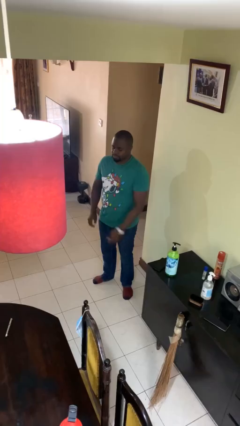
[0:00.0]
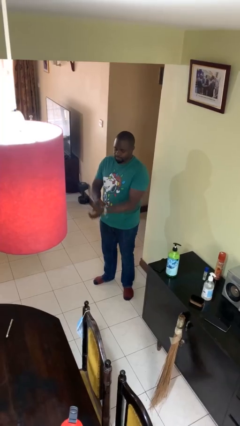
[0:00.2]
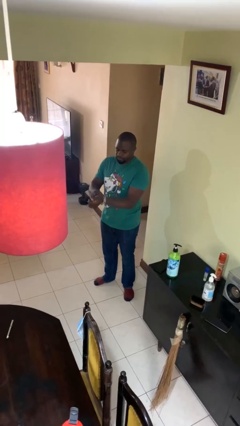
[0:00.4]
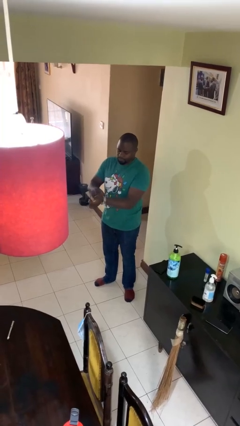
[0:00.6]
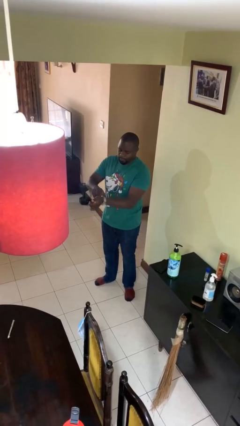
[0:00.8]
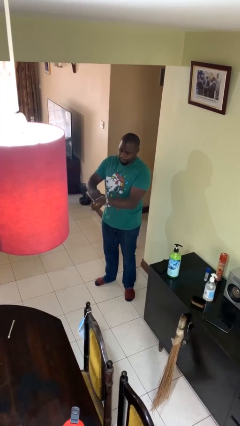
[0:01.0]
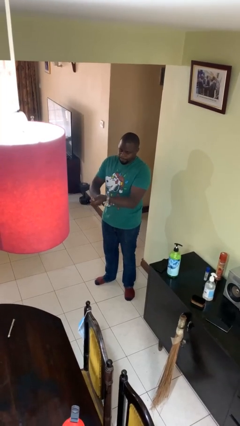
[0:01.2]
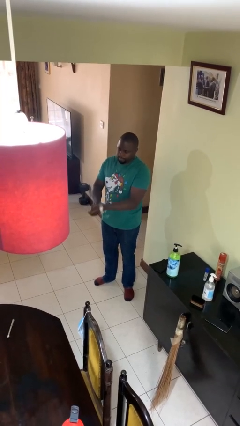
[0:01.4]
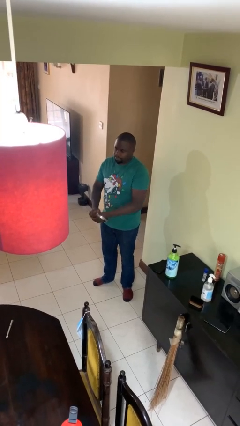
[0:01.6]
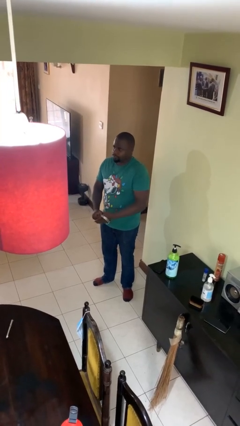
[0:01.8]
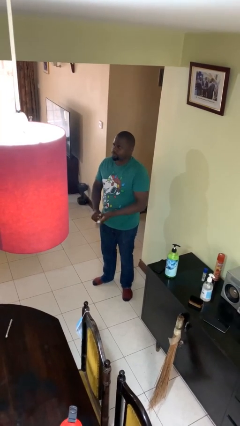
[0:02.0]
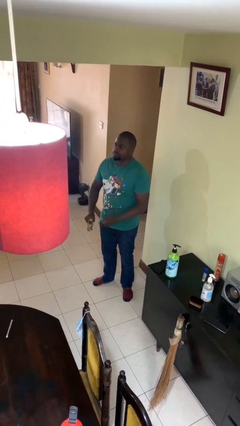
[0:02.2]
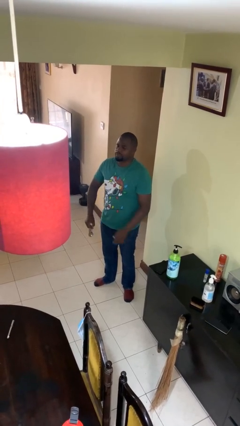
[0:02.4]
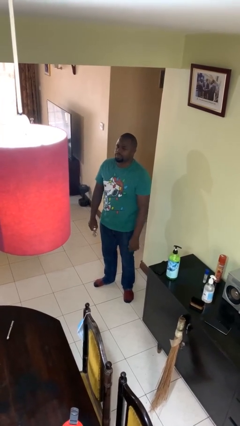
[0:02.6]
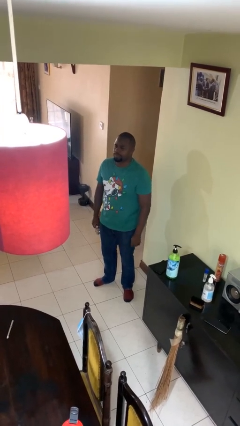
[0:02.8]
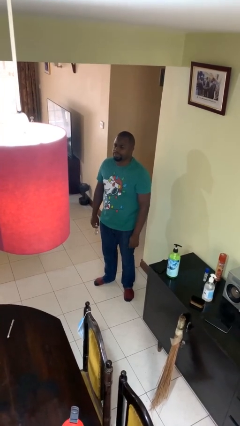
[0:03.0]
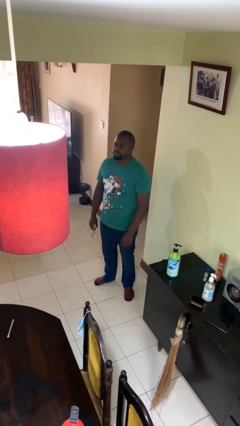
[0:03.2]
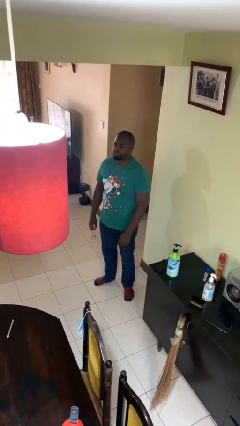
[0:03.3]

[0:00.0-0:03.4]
person takes off wristwatch

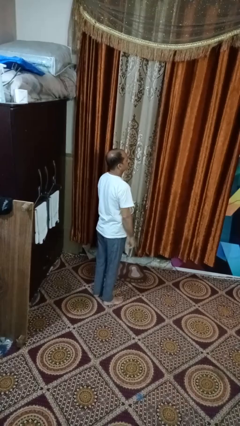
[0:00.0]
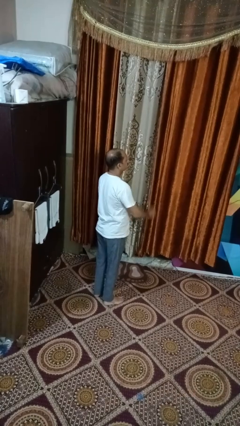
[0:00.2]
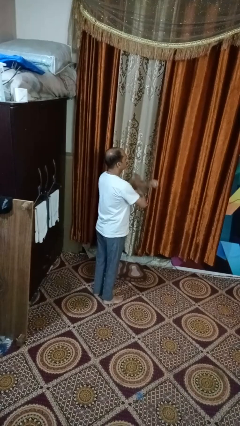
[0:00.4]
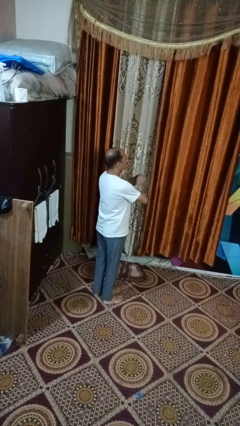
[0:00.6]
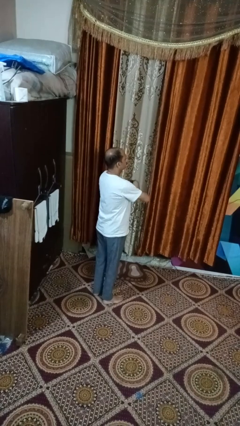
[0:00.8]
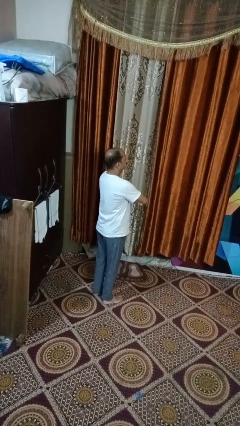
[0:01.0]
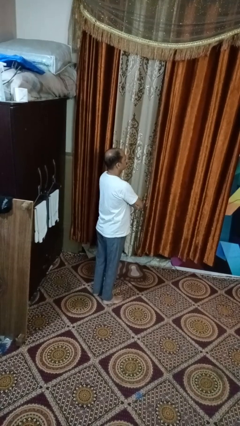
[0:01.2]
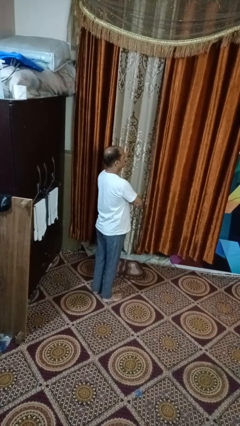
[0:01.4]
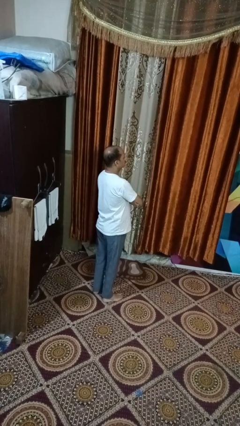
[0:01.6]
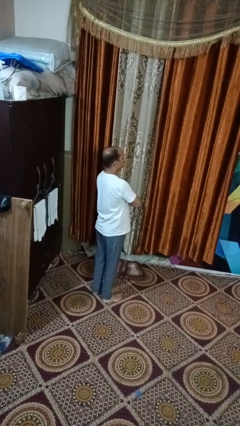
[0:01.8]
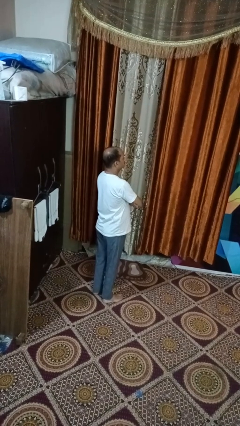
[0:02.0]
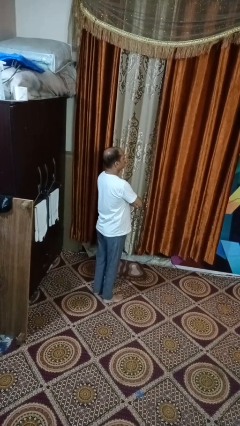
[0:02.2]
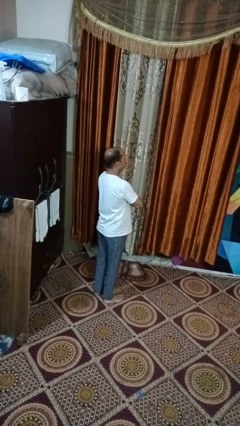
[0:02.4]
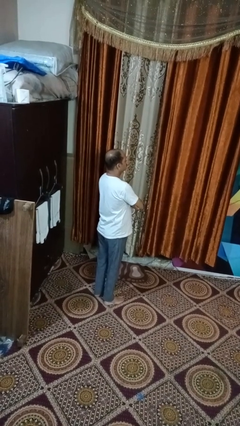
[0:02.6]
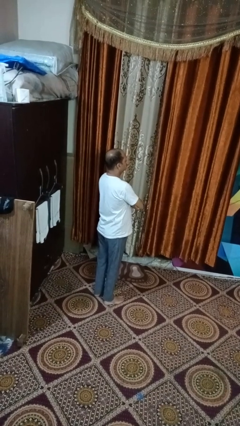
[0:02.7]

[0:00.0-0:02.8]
person crosses arms

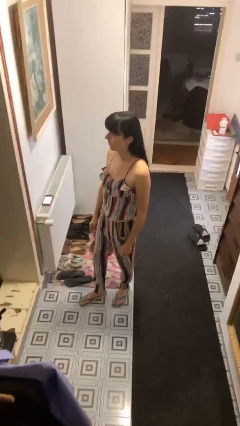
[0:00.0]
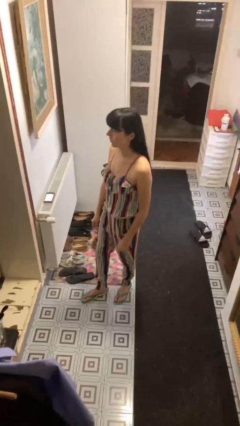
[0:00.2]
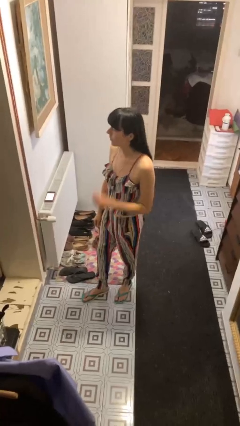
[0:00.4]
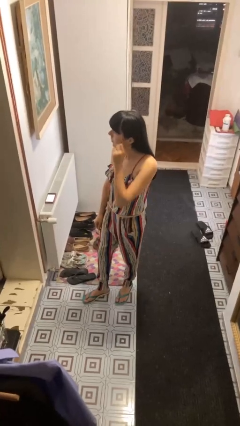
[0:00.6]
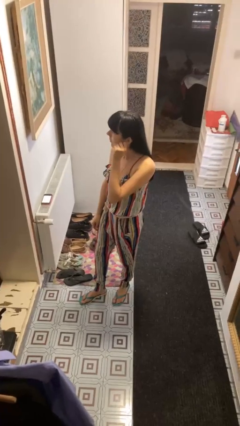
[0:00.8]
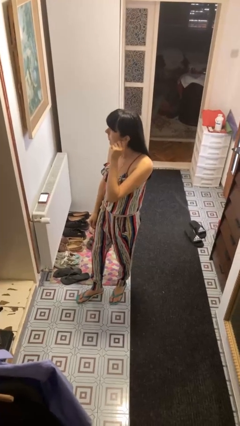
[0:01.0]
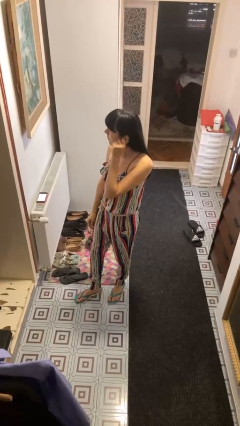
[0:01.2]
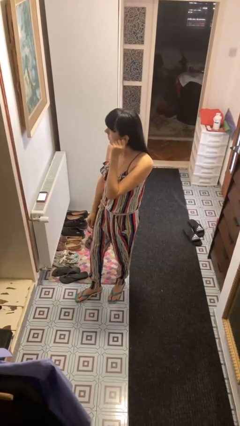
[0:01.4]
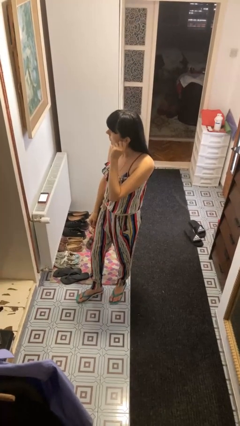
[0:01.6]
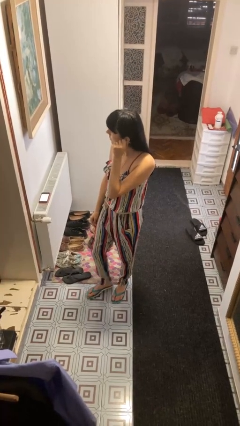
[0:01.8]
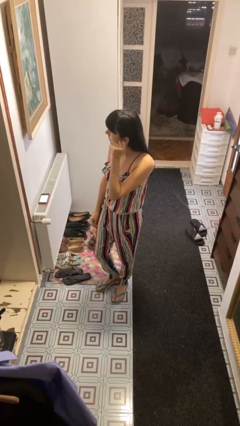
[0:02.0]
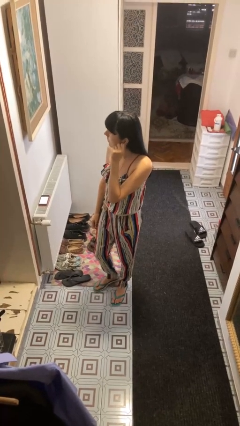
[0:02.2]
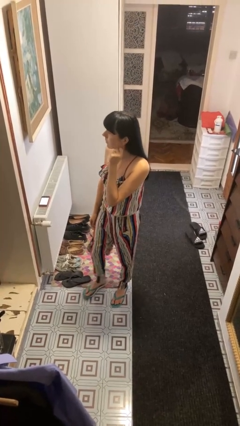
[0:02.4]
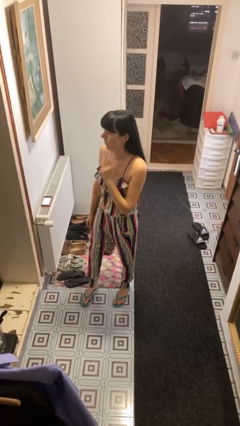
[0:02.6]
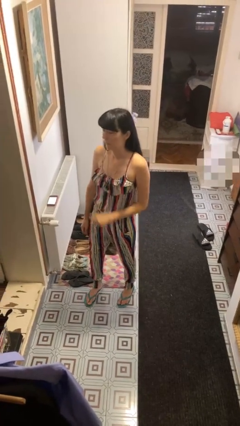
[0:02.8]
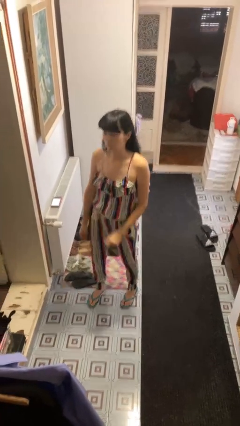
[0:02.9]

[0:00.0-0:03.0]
person touches earlobe

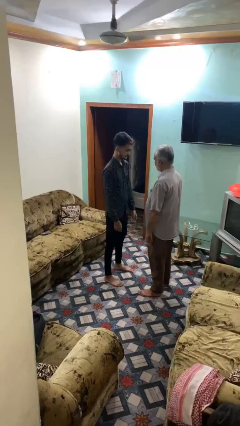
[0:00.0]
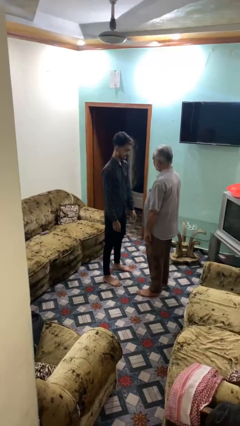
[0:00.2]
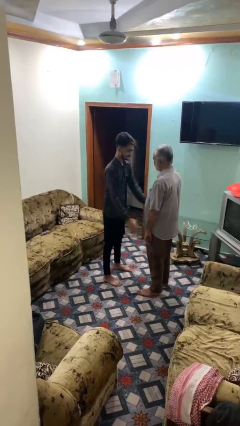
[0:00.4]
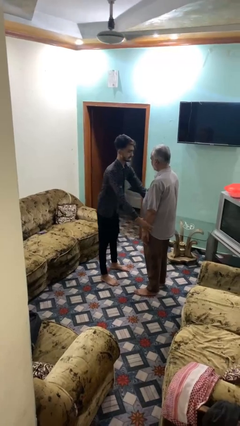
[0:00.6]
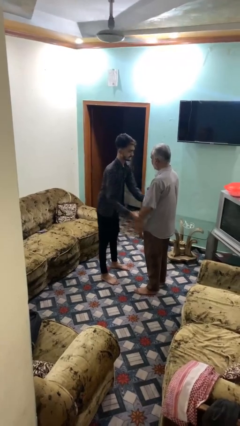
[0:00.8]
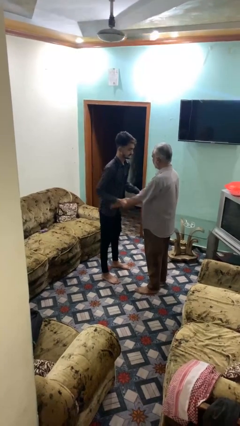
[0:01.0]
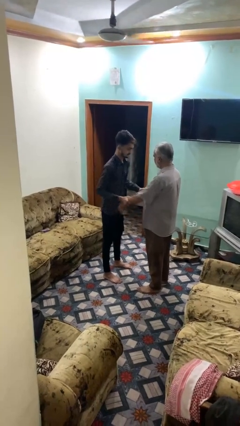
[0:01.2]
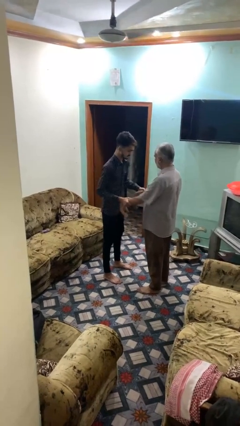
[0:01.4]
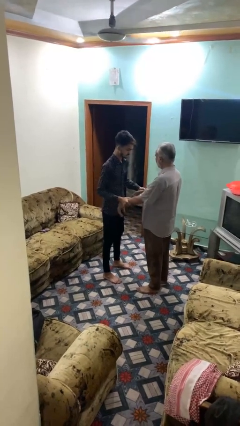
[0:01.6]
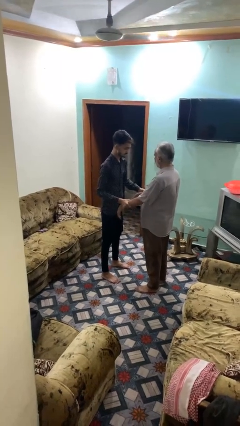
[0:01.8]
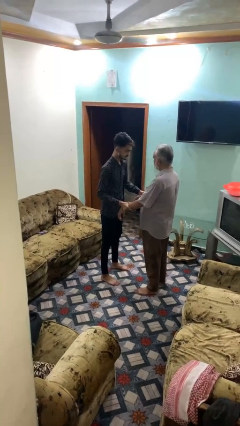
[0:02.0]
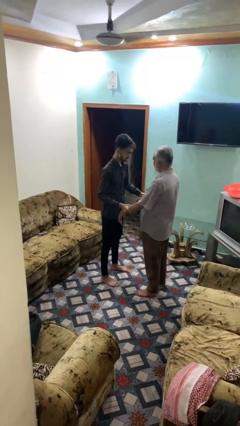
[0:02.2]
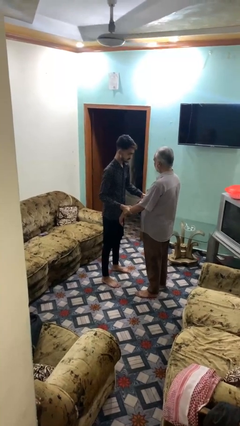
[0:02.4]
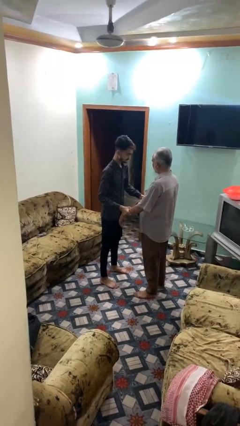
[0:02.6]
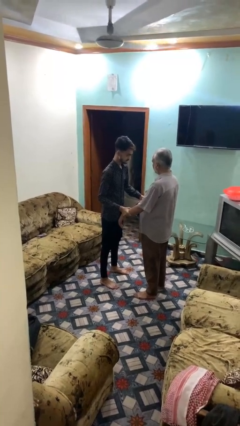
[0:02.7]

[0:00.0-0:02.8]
person grabs person by forearm

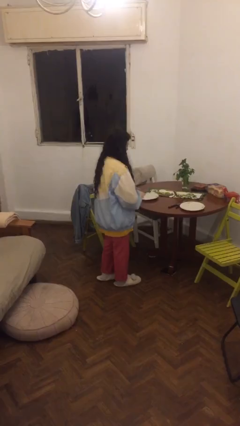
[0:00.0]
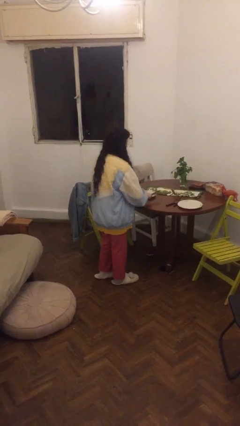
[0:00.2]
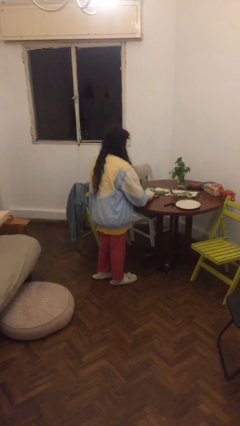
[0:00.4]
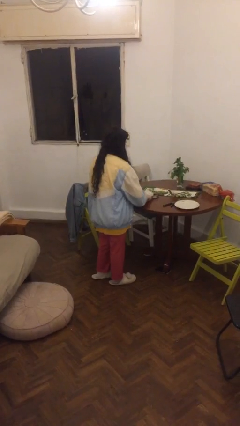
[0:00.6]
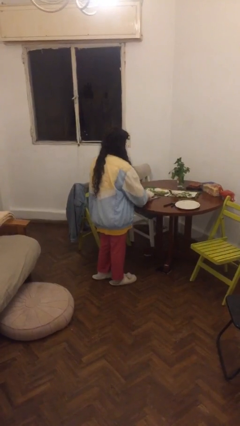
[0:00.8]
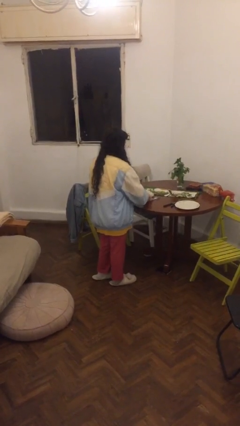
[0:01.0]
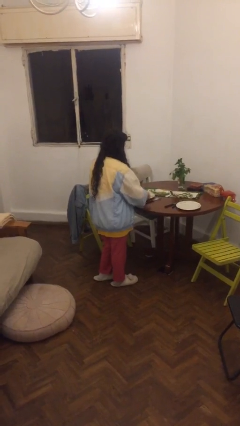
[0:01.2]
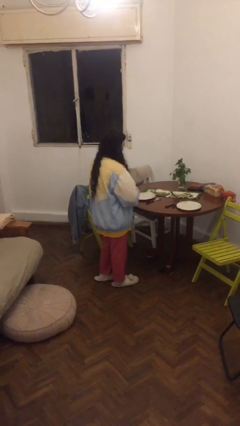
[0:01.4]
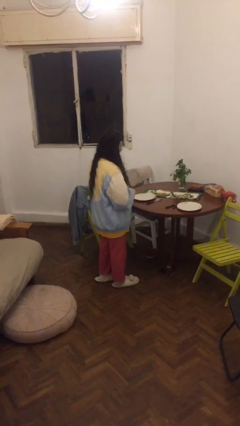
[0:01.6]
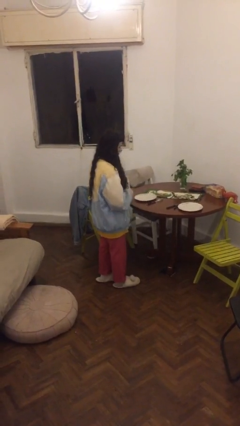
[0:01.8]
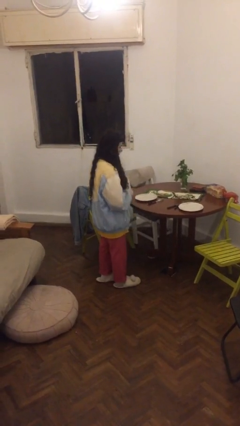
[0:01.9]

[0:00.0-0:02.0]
person sets table

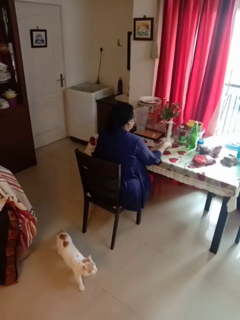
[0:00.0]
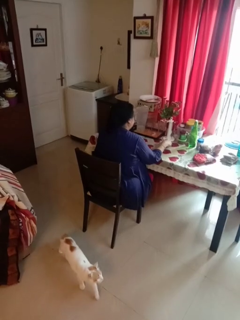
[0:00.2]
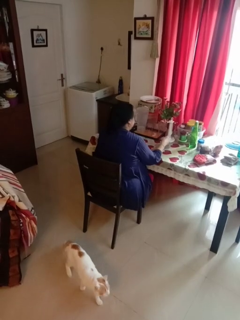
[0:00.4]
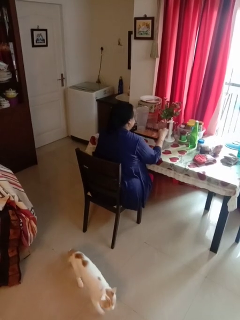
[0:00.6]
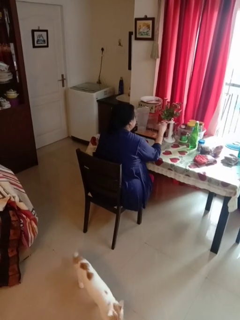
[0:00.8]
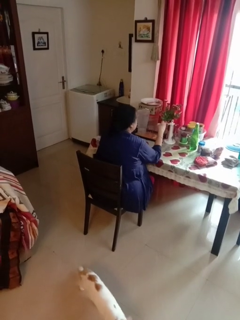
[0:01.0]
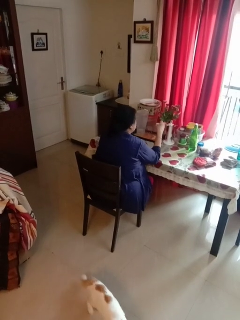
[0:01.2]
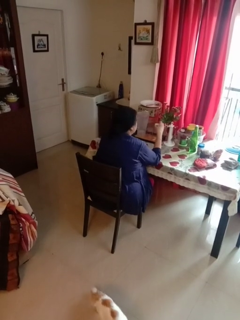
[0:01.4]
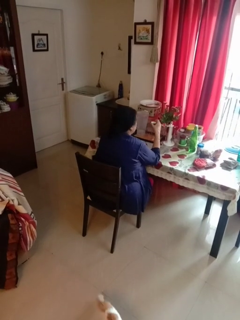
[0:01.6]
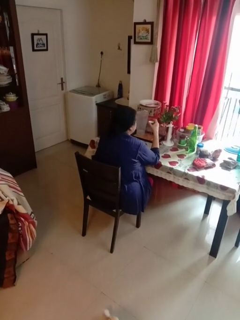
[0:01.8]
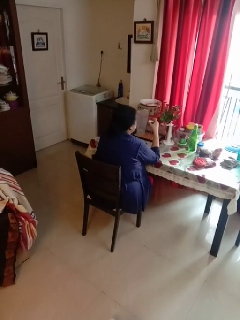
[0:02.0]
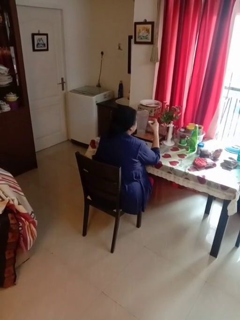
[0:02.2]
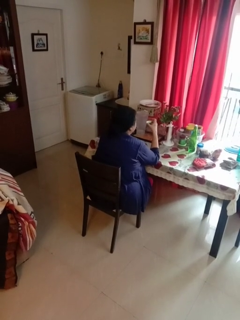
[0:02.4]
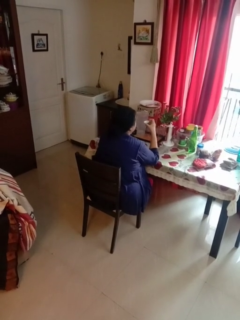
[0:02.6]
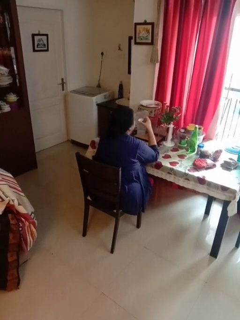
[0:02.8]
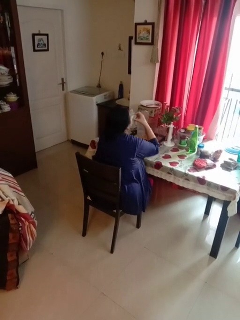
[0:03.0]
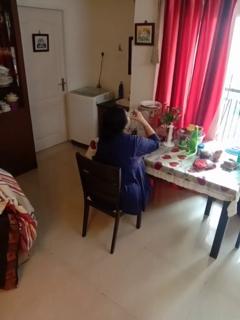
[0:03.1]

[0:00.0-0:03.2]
person picks up object from table

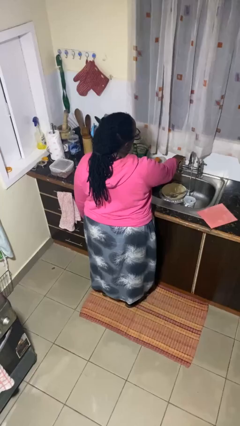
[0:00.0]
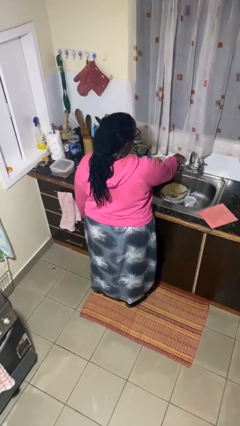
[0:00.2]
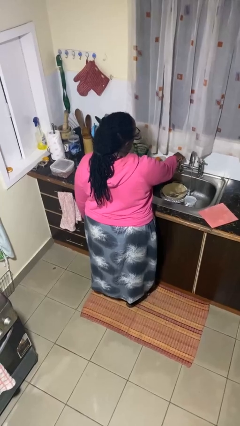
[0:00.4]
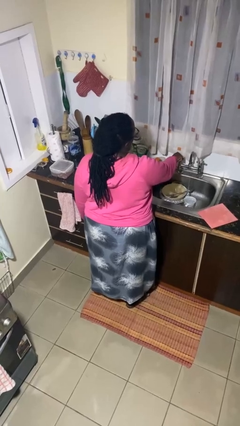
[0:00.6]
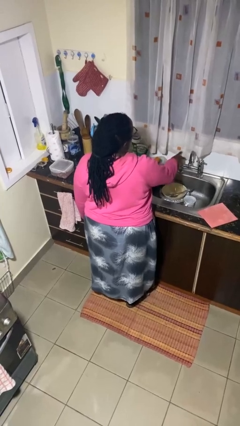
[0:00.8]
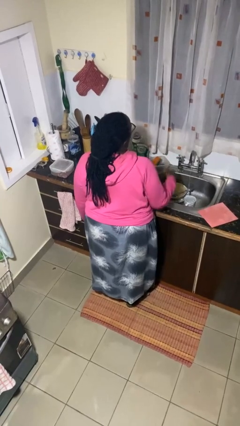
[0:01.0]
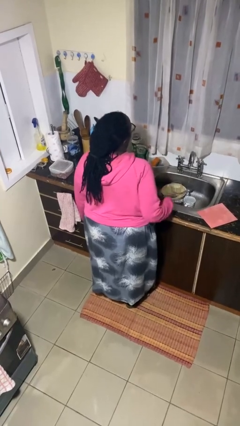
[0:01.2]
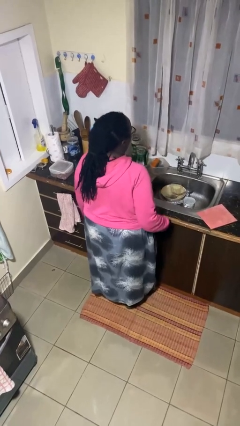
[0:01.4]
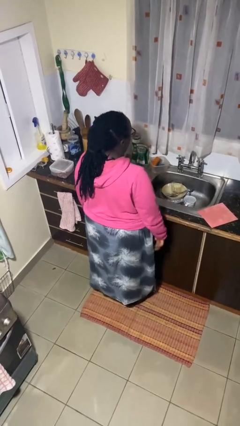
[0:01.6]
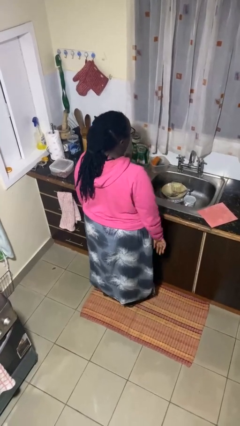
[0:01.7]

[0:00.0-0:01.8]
person turns off faucet
